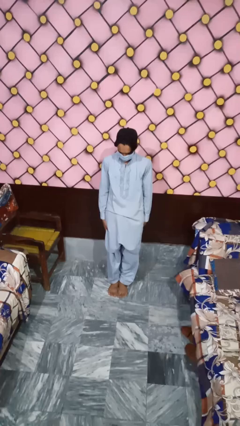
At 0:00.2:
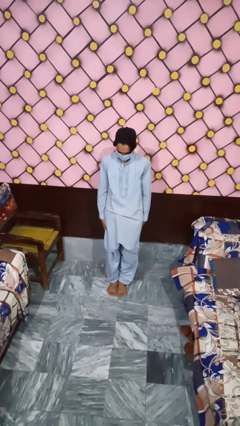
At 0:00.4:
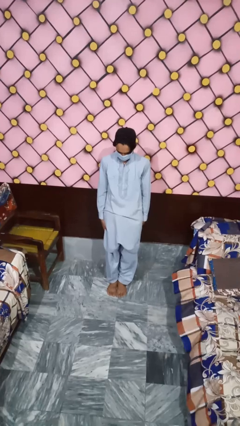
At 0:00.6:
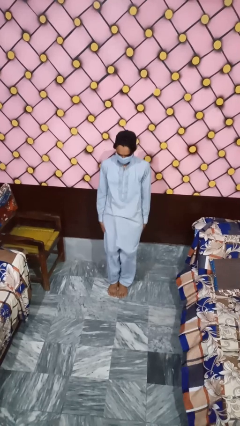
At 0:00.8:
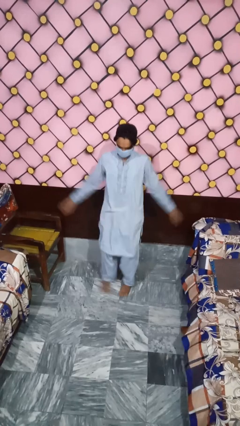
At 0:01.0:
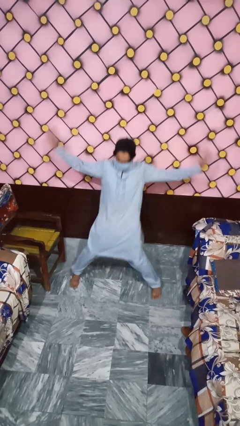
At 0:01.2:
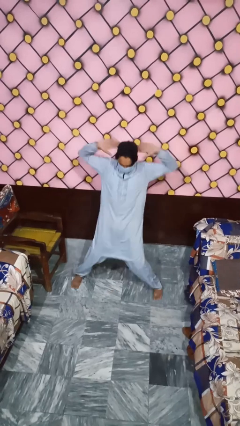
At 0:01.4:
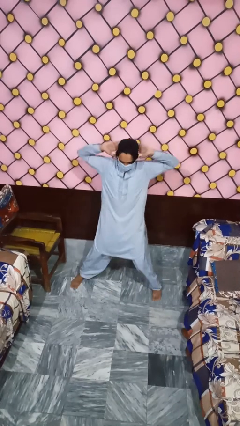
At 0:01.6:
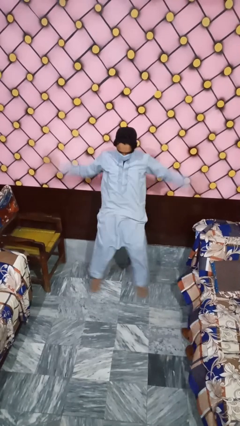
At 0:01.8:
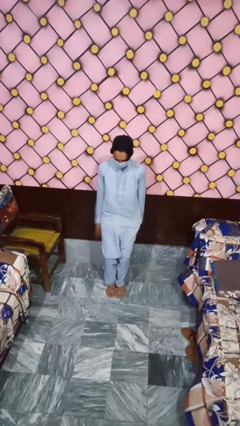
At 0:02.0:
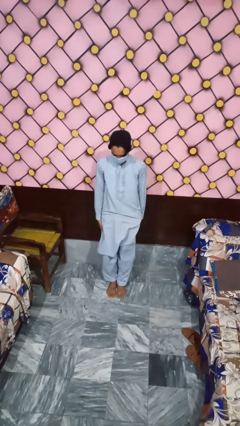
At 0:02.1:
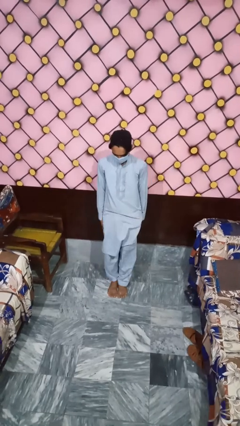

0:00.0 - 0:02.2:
person exercises with jumping jacks

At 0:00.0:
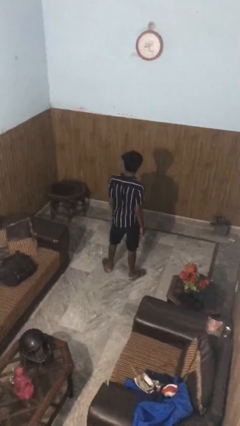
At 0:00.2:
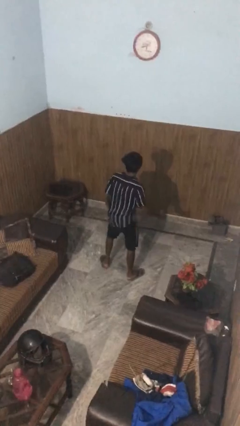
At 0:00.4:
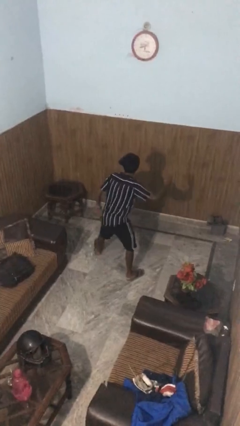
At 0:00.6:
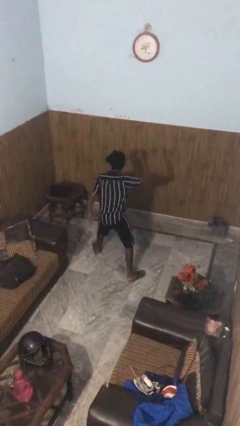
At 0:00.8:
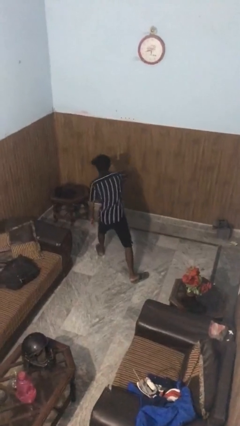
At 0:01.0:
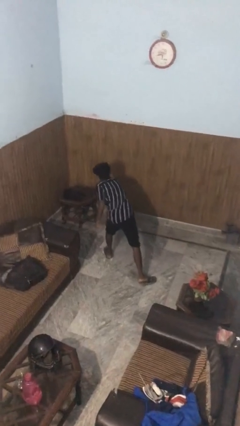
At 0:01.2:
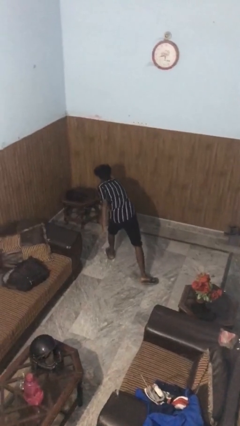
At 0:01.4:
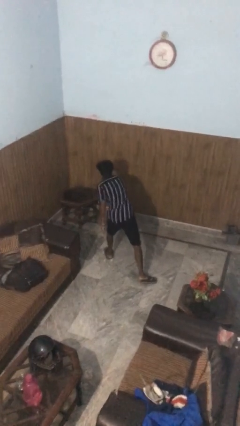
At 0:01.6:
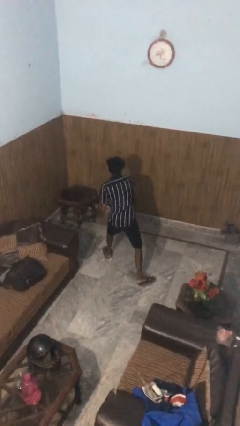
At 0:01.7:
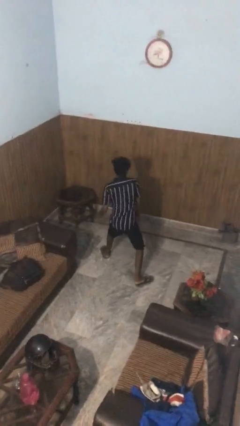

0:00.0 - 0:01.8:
person karate chop

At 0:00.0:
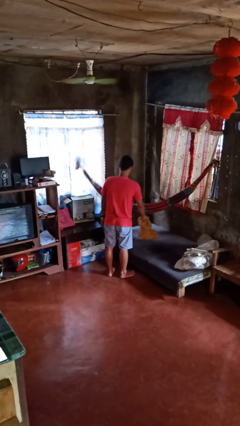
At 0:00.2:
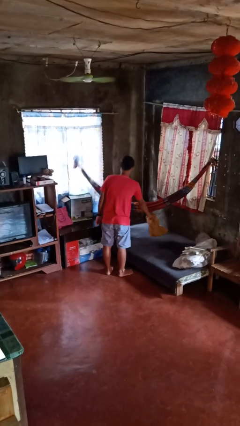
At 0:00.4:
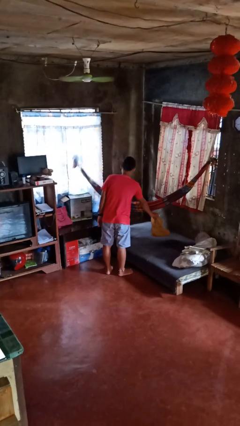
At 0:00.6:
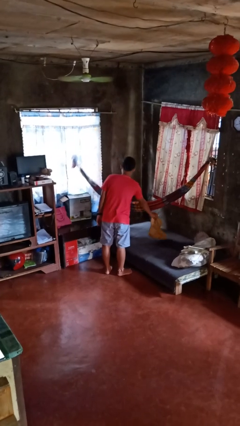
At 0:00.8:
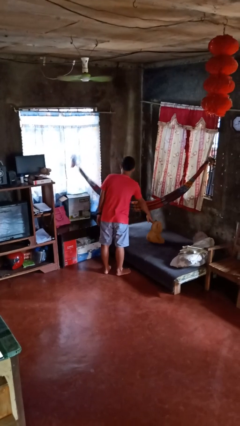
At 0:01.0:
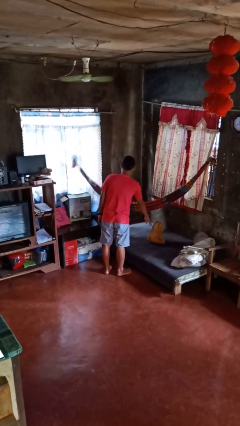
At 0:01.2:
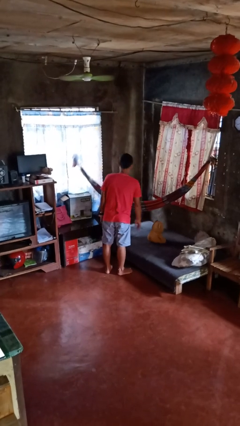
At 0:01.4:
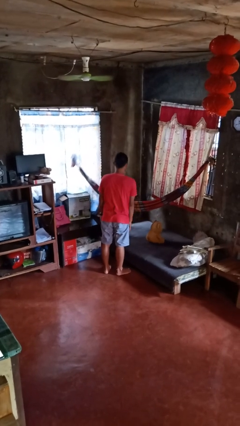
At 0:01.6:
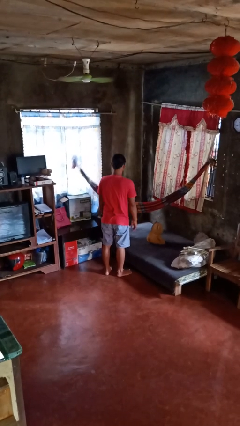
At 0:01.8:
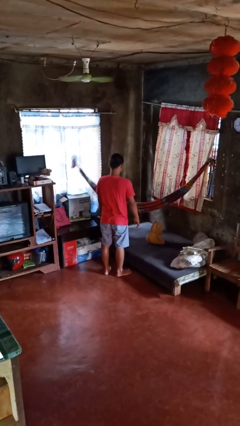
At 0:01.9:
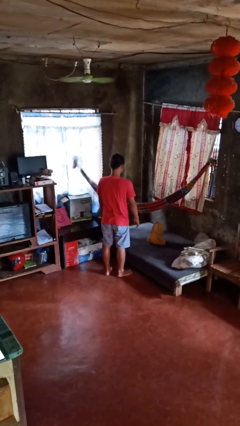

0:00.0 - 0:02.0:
person puts down object on bed

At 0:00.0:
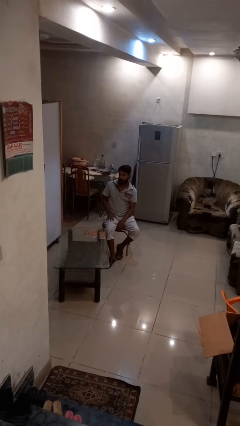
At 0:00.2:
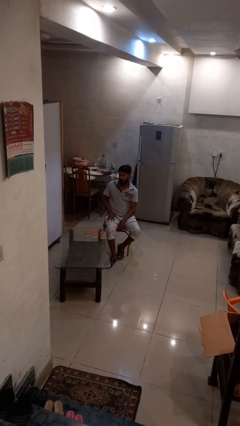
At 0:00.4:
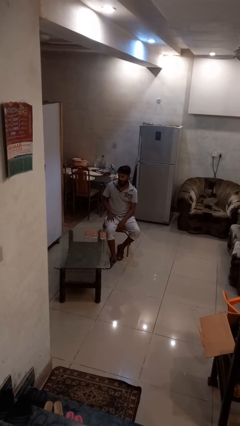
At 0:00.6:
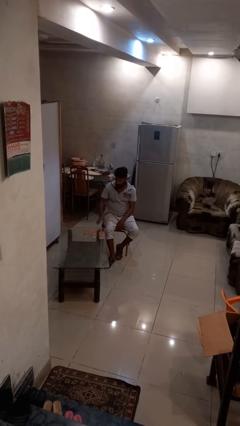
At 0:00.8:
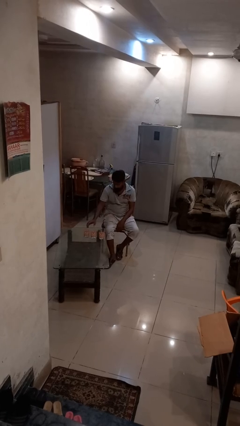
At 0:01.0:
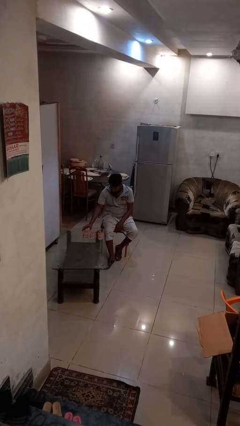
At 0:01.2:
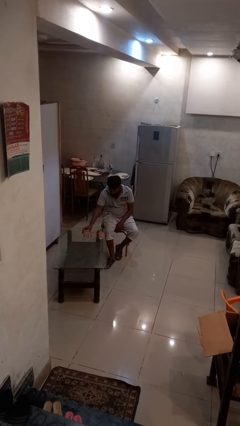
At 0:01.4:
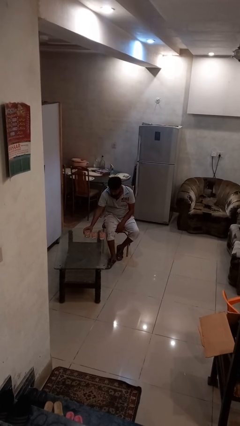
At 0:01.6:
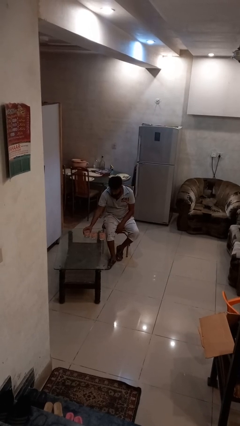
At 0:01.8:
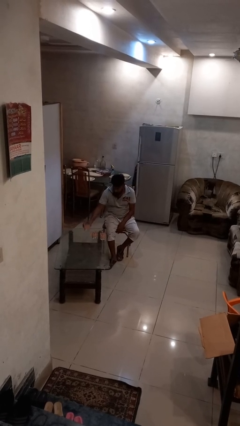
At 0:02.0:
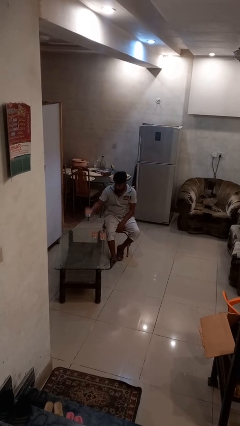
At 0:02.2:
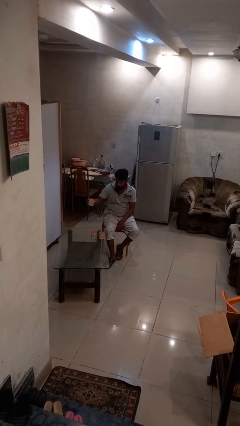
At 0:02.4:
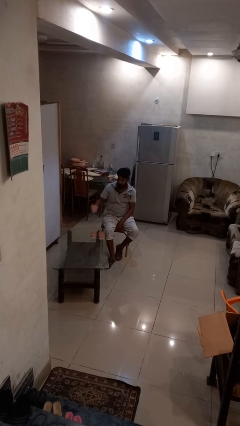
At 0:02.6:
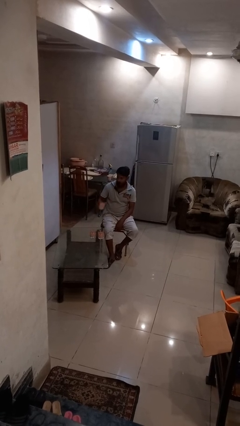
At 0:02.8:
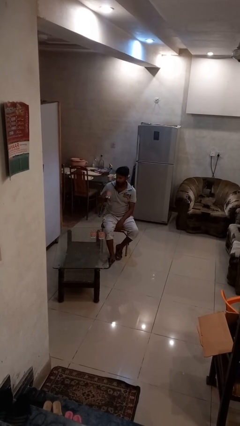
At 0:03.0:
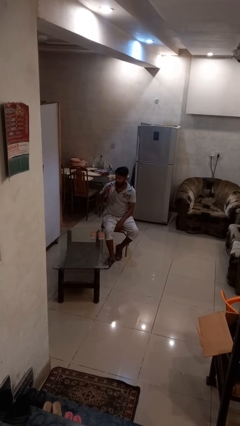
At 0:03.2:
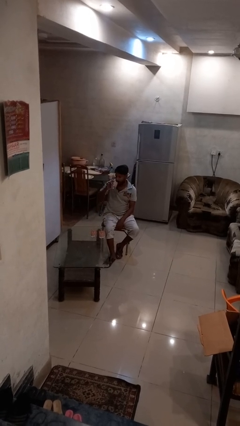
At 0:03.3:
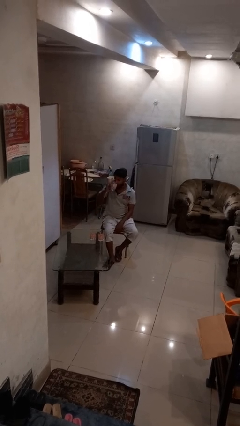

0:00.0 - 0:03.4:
person picks up object from table

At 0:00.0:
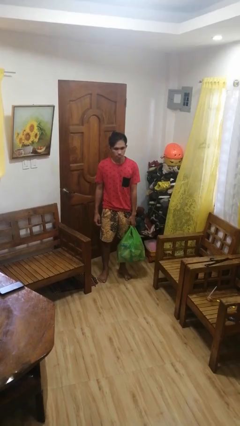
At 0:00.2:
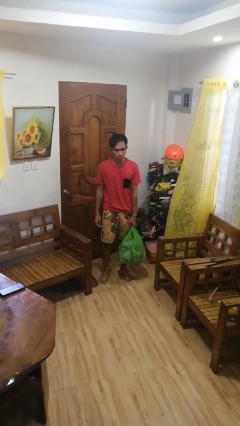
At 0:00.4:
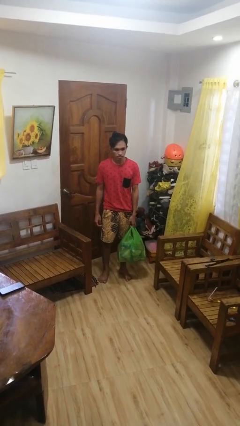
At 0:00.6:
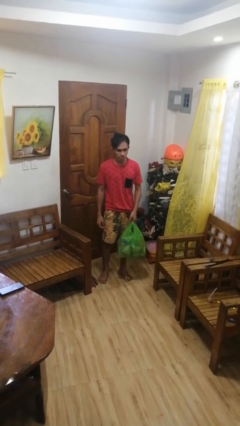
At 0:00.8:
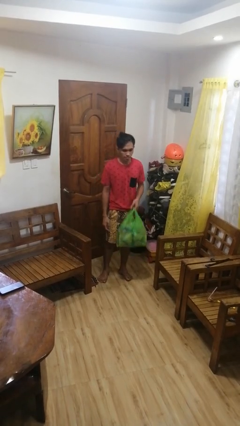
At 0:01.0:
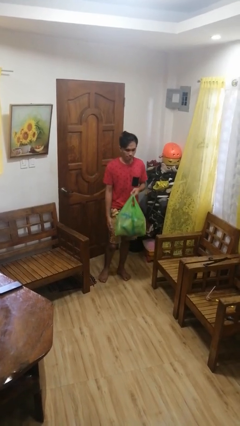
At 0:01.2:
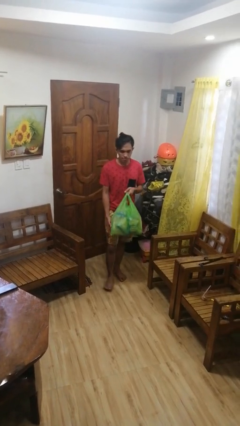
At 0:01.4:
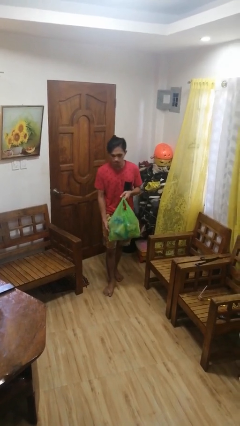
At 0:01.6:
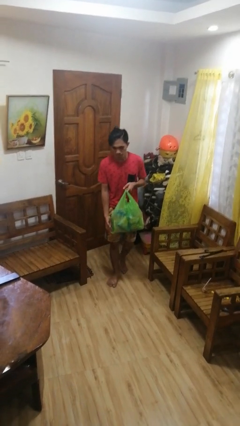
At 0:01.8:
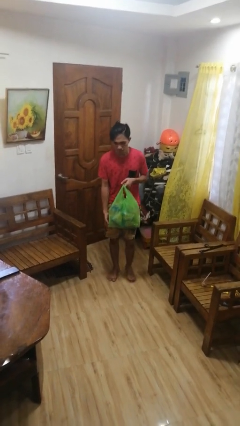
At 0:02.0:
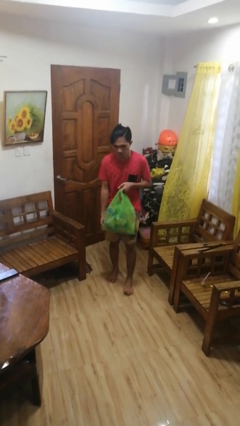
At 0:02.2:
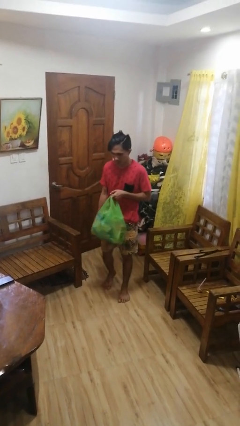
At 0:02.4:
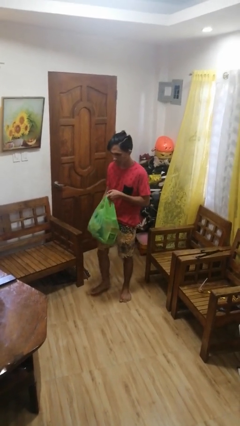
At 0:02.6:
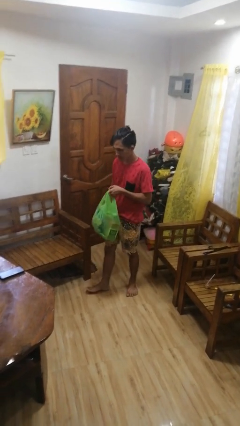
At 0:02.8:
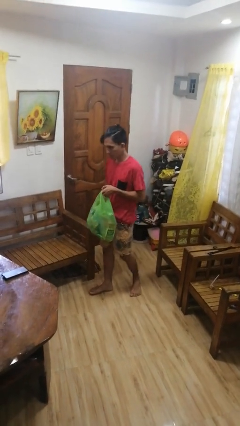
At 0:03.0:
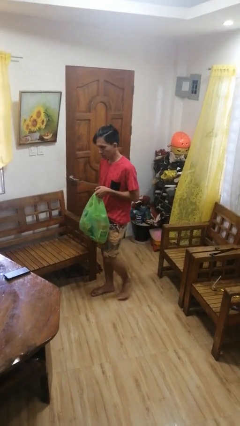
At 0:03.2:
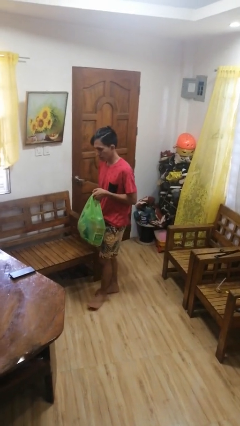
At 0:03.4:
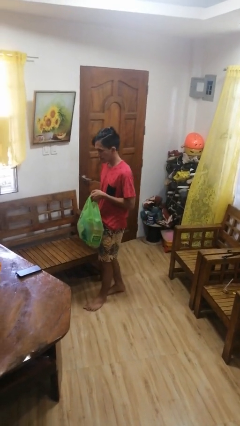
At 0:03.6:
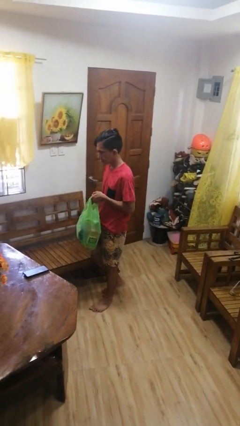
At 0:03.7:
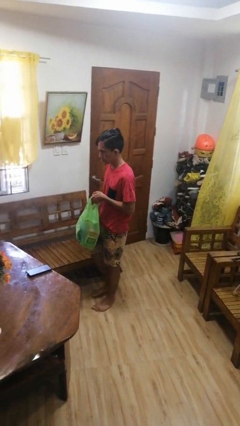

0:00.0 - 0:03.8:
person carries groceries

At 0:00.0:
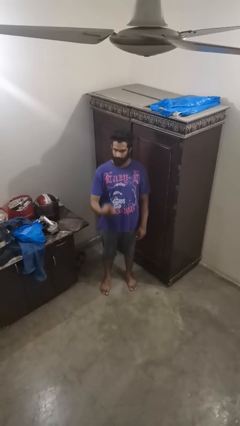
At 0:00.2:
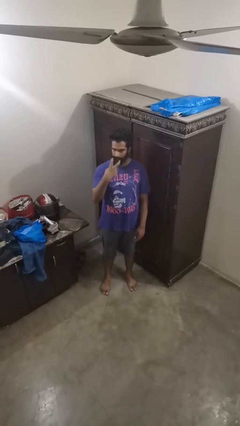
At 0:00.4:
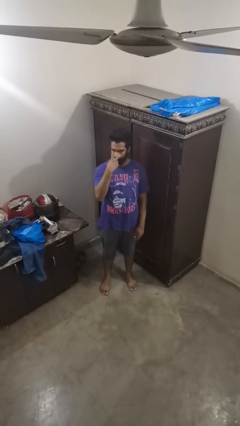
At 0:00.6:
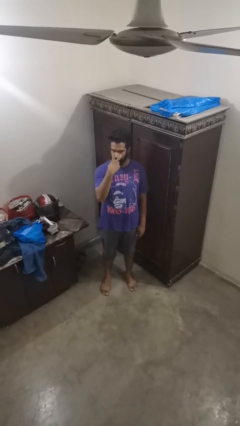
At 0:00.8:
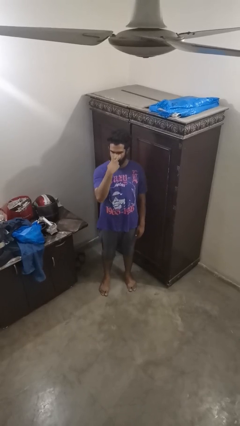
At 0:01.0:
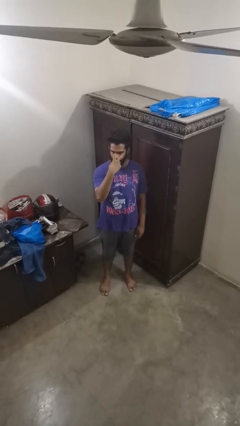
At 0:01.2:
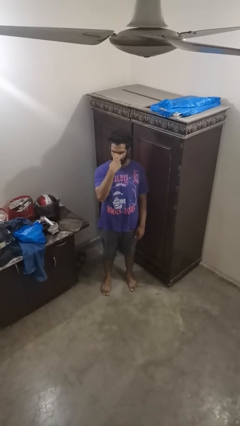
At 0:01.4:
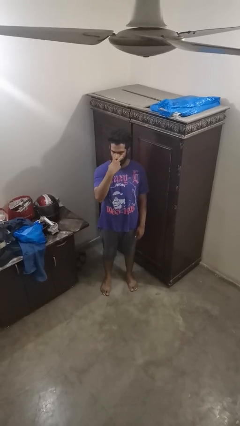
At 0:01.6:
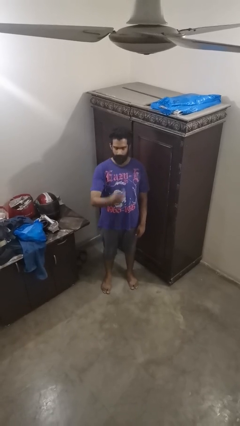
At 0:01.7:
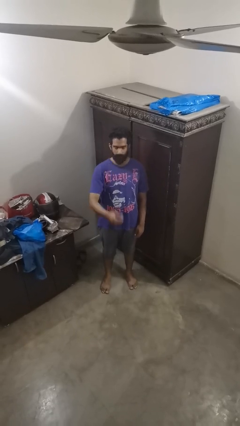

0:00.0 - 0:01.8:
person gestures watch closely

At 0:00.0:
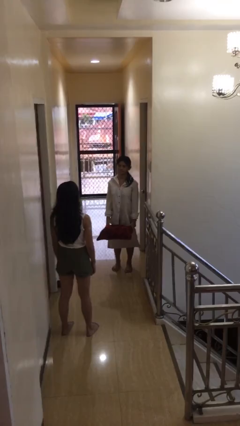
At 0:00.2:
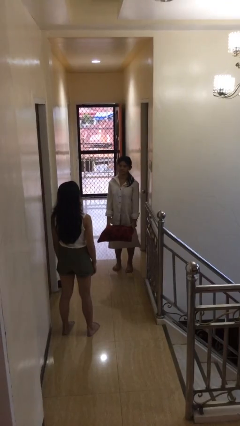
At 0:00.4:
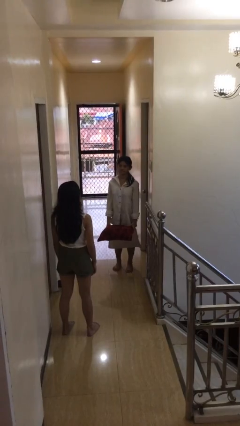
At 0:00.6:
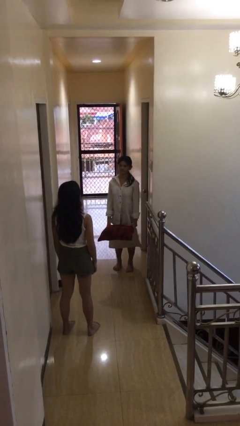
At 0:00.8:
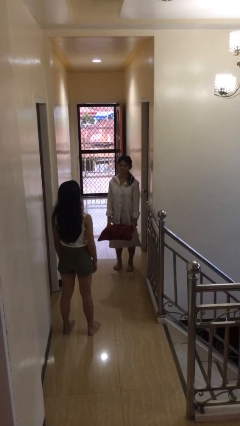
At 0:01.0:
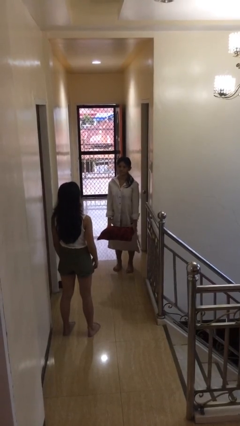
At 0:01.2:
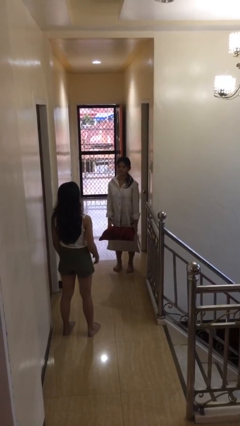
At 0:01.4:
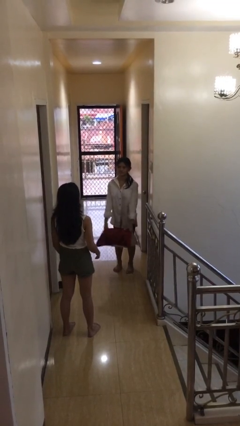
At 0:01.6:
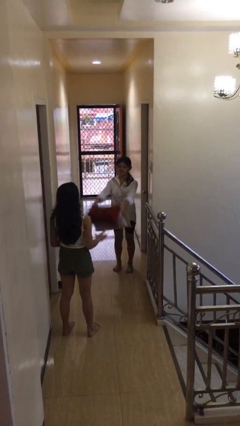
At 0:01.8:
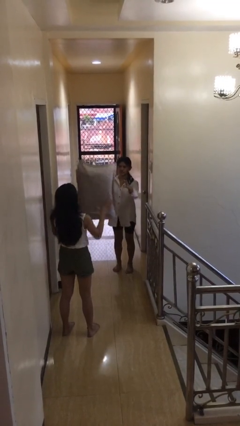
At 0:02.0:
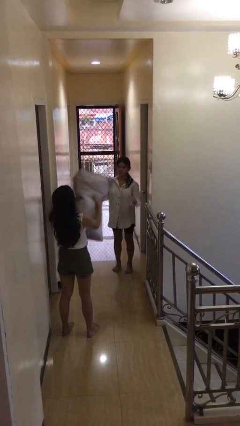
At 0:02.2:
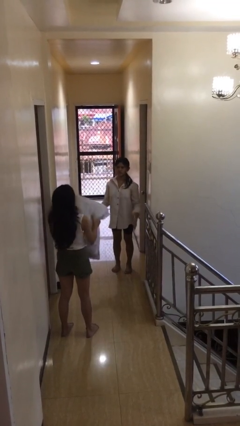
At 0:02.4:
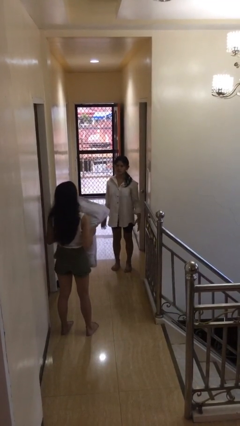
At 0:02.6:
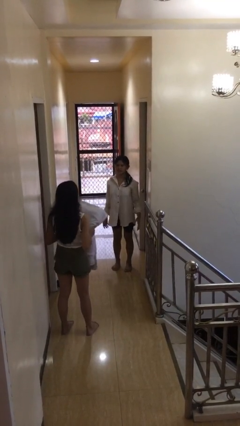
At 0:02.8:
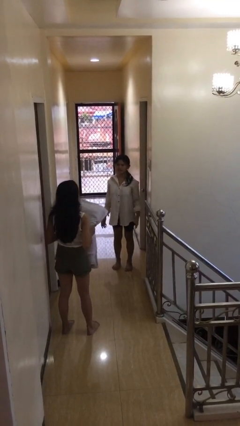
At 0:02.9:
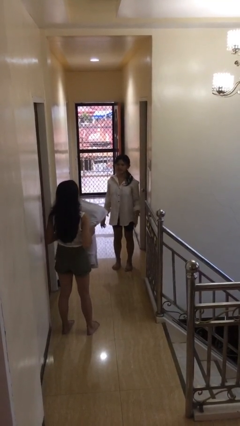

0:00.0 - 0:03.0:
person throws object to person
